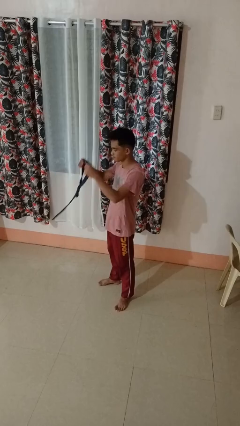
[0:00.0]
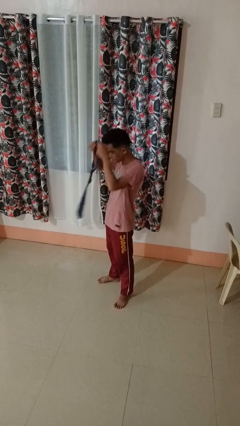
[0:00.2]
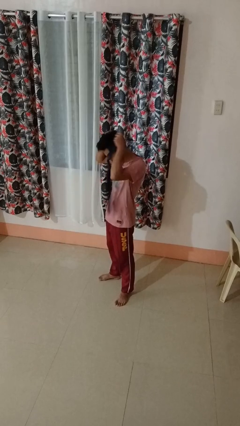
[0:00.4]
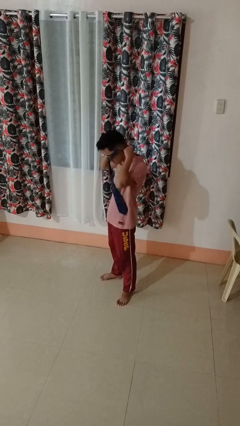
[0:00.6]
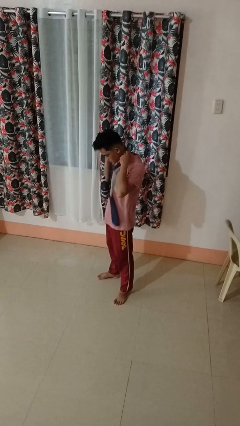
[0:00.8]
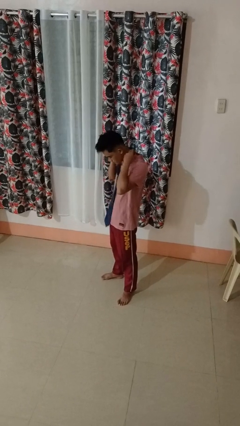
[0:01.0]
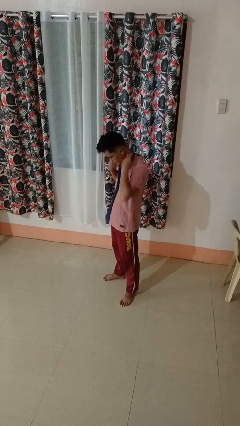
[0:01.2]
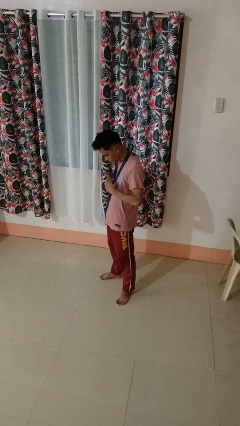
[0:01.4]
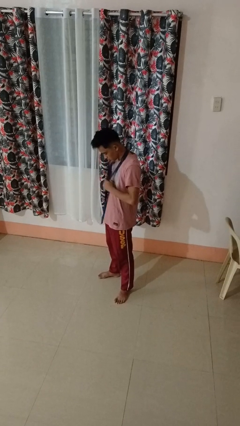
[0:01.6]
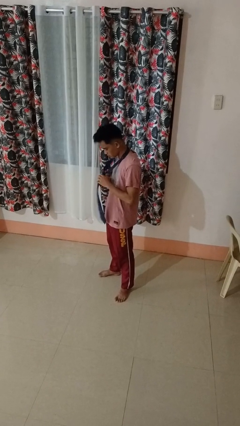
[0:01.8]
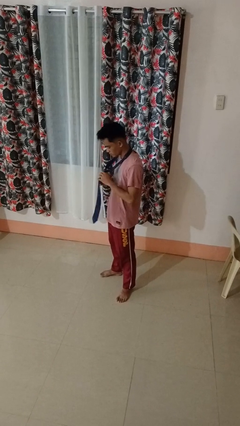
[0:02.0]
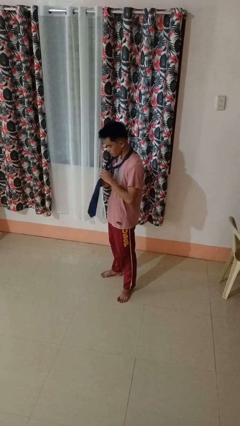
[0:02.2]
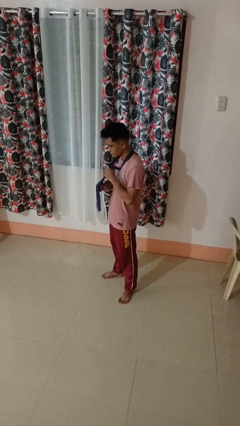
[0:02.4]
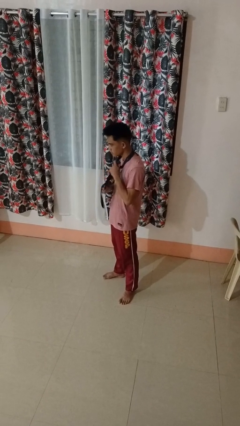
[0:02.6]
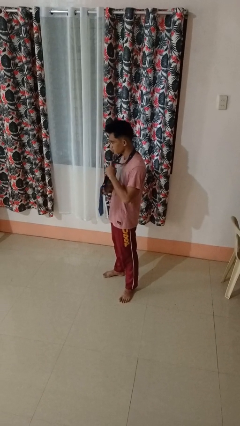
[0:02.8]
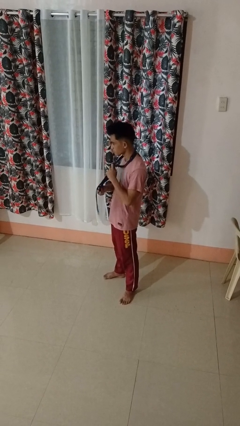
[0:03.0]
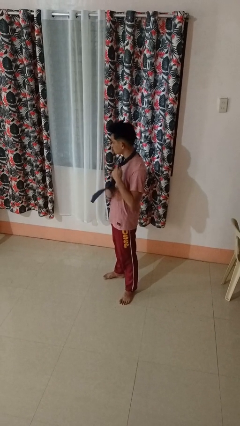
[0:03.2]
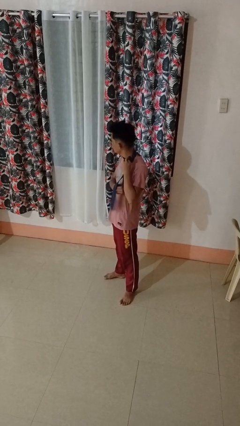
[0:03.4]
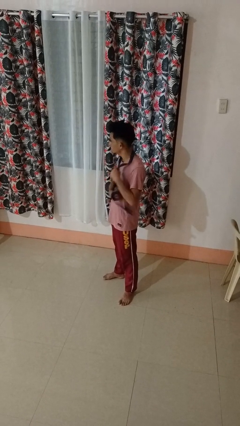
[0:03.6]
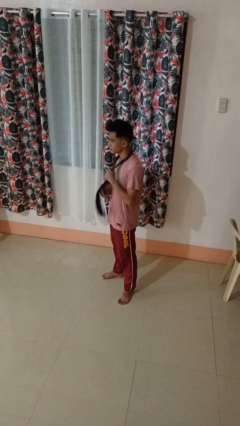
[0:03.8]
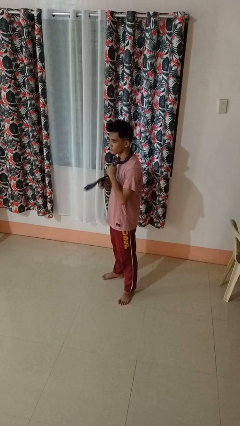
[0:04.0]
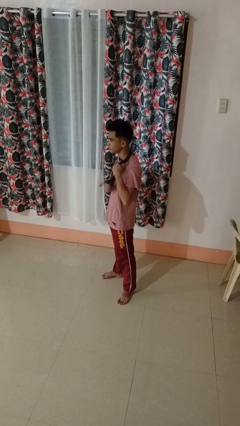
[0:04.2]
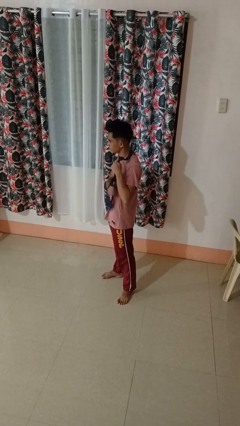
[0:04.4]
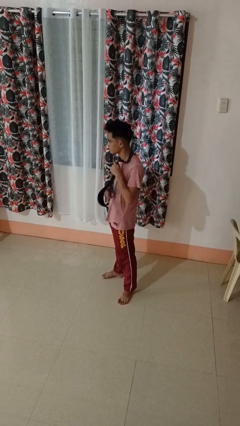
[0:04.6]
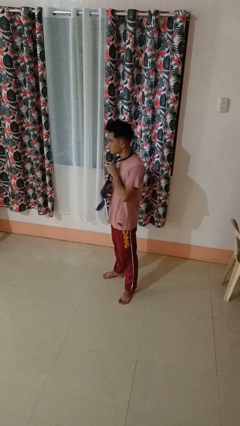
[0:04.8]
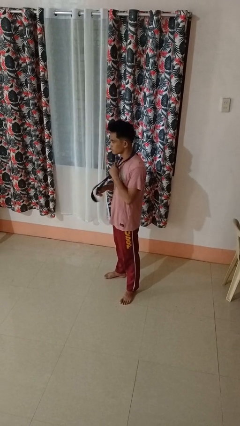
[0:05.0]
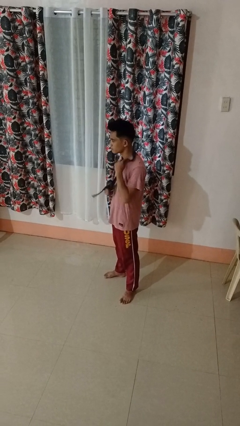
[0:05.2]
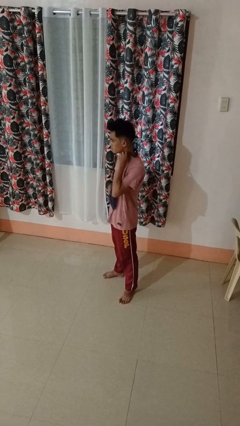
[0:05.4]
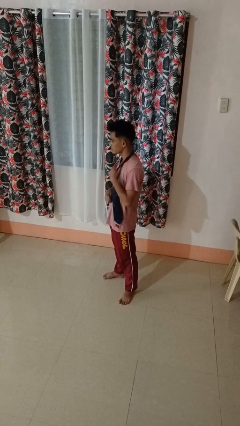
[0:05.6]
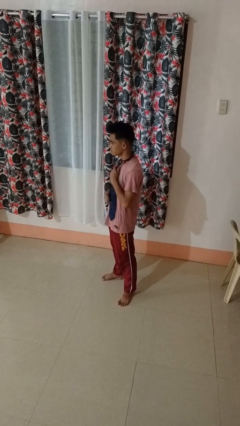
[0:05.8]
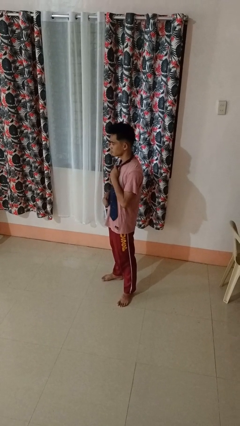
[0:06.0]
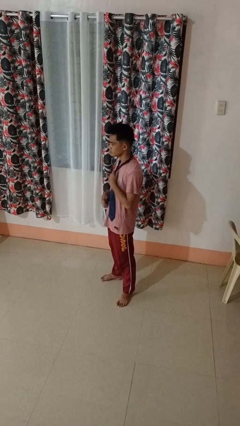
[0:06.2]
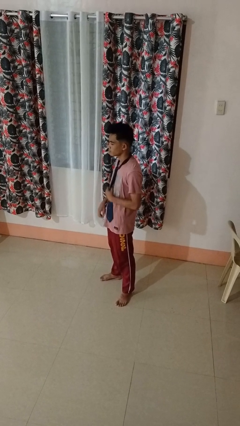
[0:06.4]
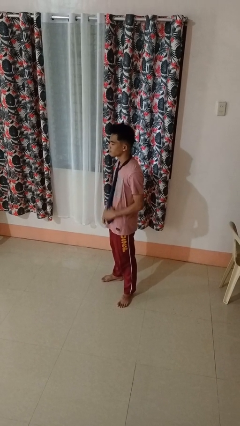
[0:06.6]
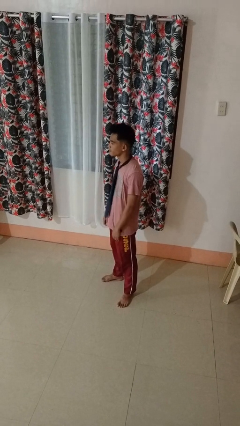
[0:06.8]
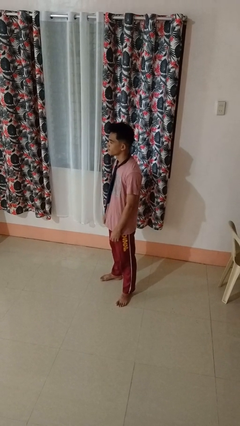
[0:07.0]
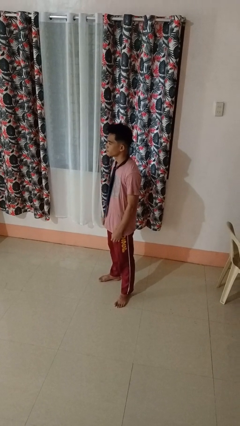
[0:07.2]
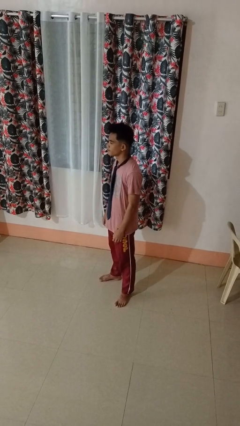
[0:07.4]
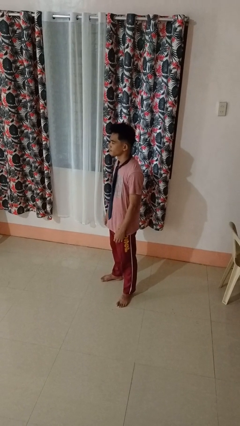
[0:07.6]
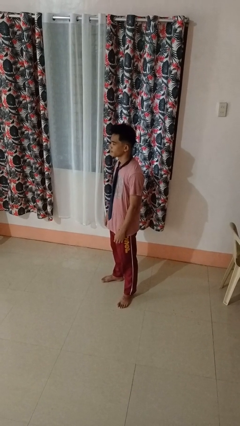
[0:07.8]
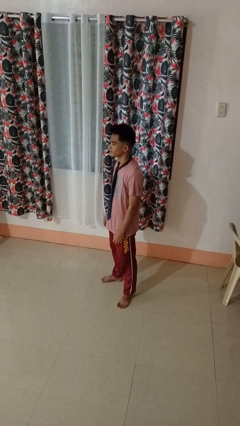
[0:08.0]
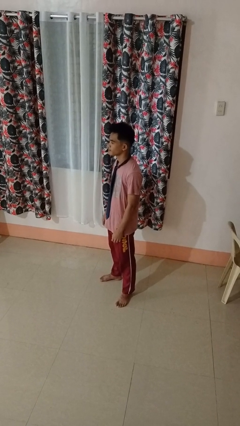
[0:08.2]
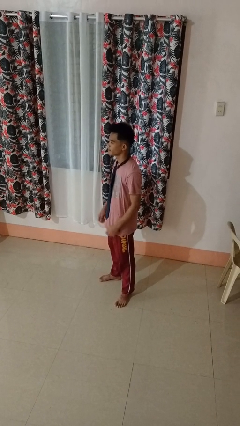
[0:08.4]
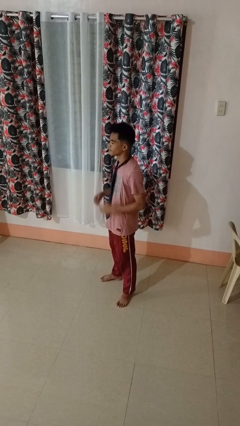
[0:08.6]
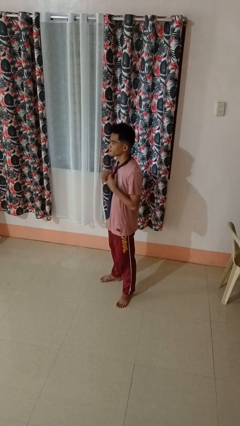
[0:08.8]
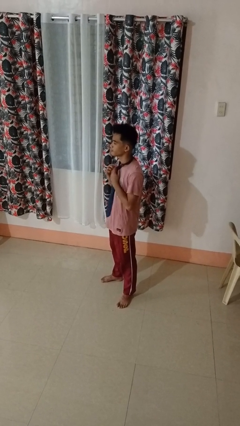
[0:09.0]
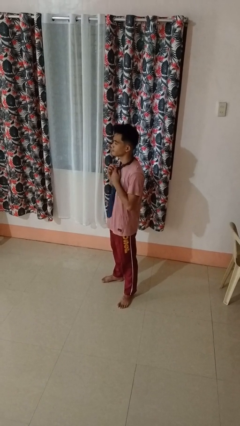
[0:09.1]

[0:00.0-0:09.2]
person puts on necktie

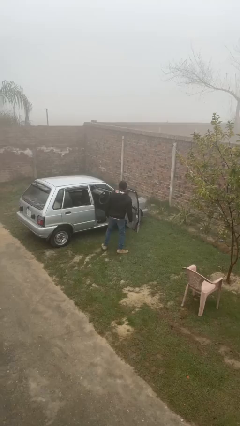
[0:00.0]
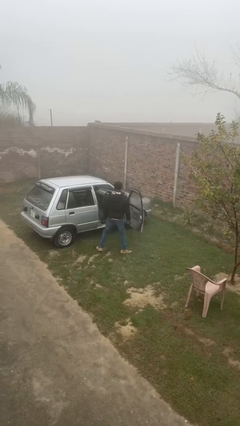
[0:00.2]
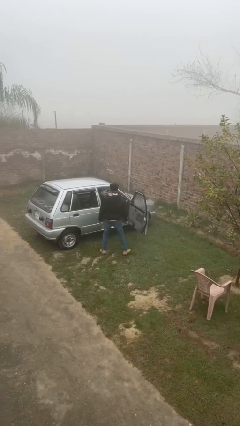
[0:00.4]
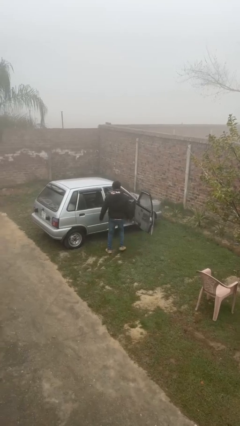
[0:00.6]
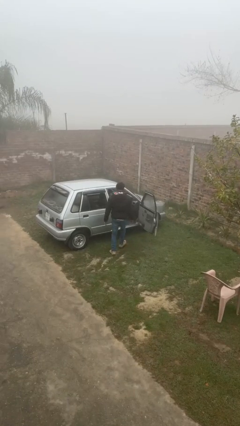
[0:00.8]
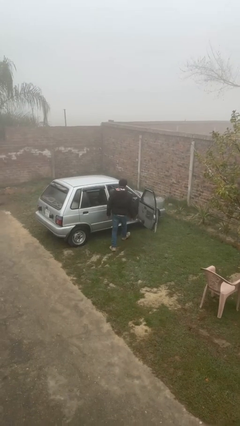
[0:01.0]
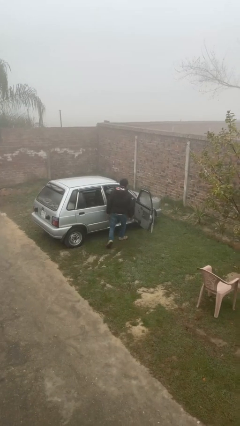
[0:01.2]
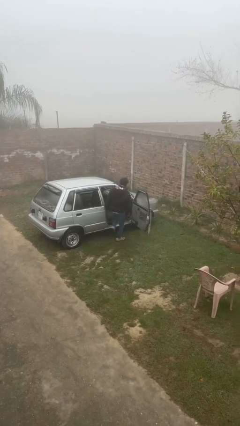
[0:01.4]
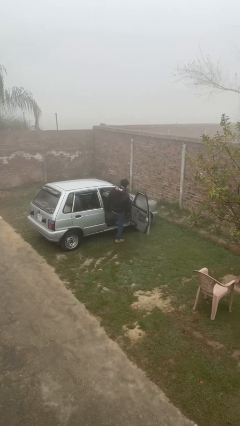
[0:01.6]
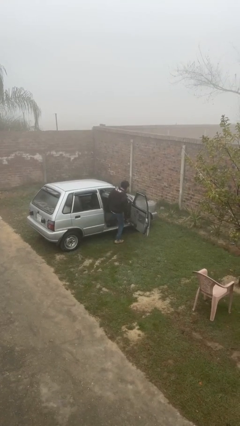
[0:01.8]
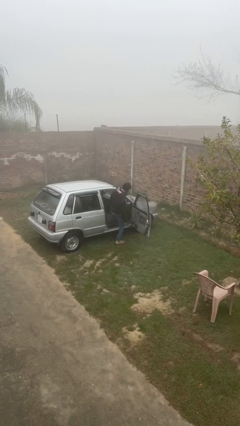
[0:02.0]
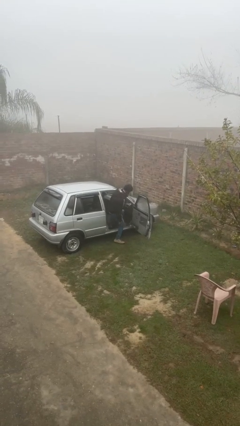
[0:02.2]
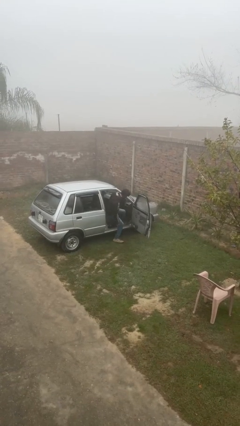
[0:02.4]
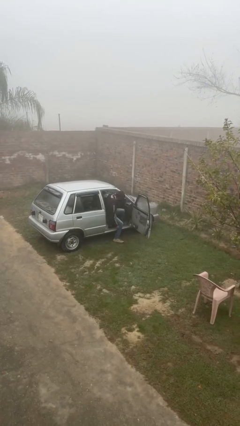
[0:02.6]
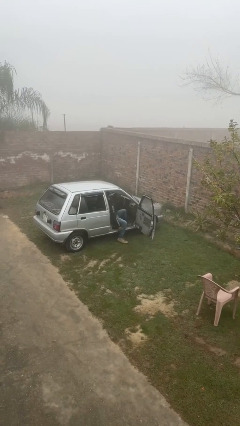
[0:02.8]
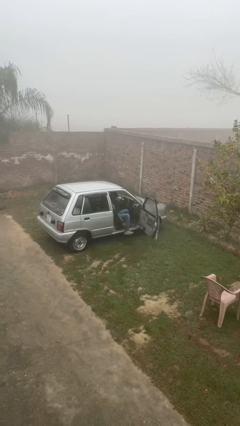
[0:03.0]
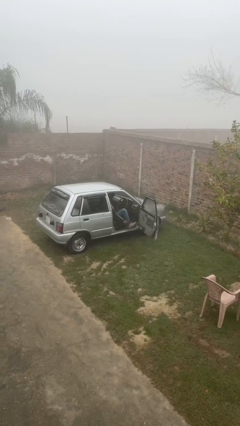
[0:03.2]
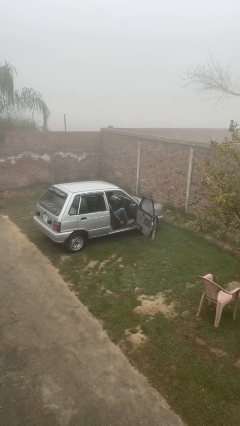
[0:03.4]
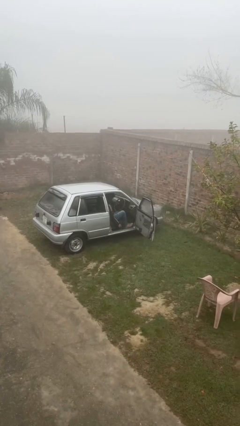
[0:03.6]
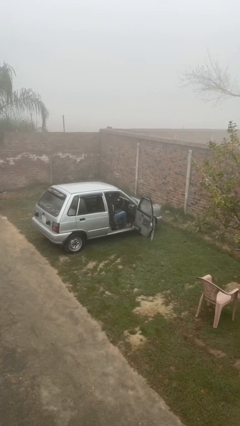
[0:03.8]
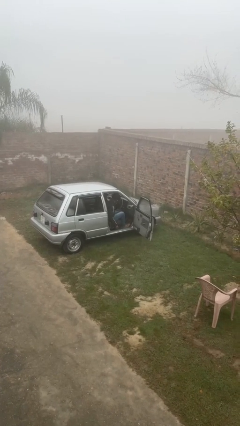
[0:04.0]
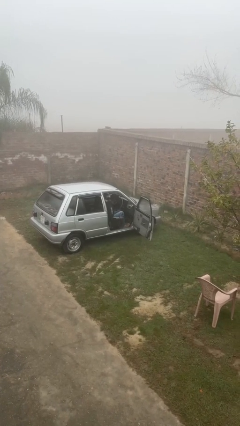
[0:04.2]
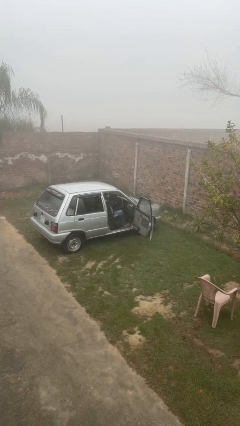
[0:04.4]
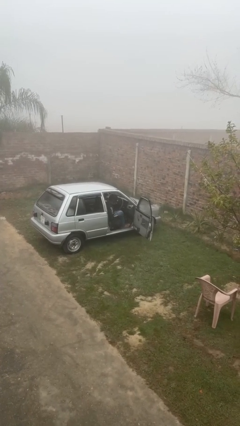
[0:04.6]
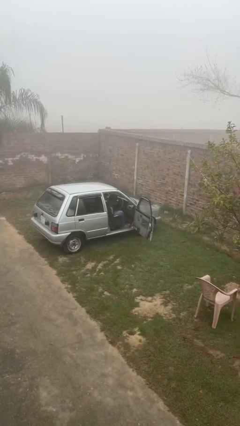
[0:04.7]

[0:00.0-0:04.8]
person enters car

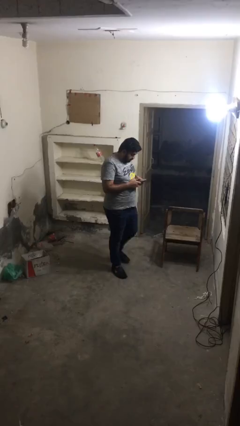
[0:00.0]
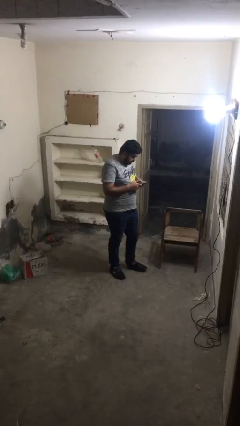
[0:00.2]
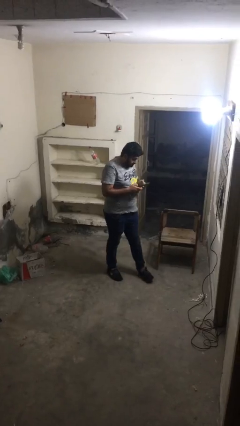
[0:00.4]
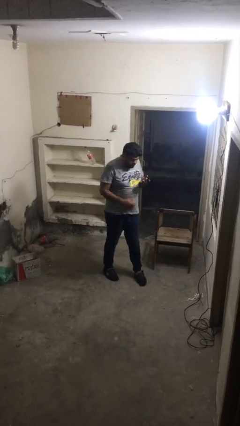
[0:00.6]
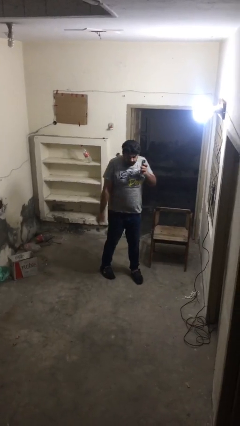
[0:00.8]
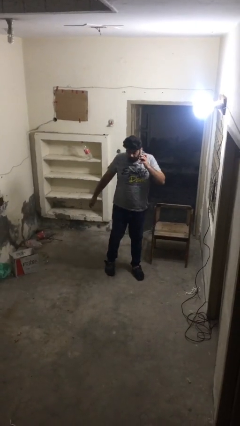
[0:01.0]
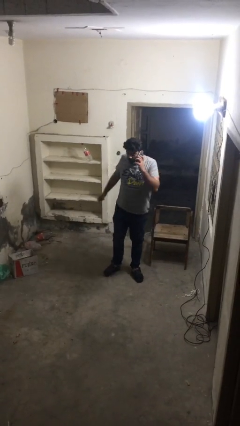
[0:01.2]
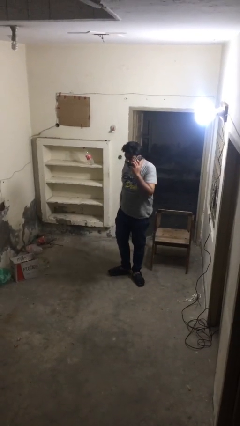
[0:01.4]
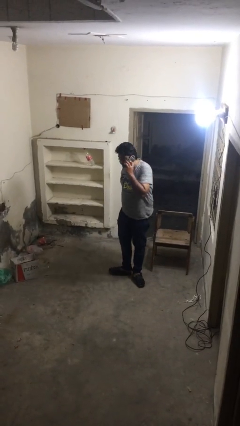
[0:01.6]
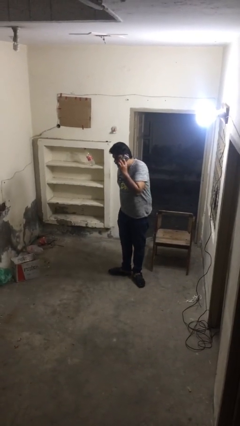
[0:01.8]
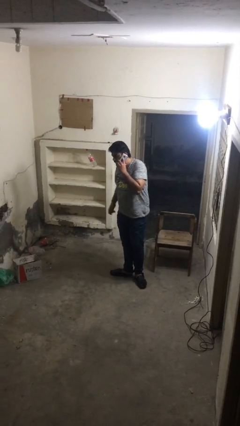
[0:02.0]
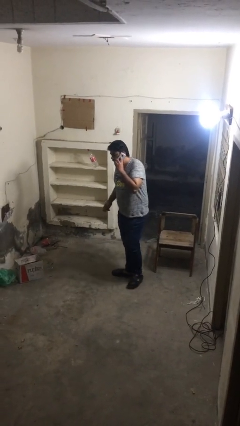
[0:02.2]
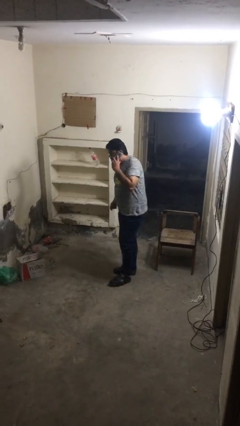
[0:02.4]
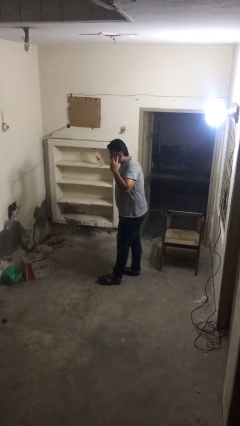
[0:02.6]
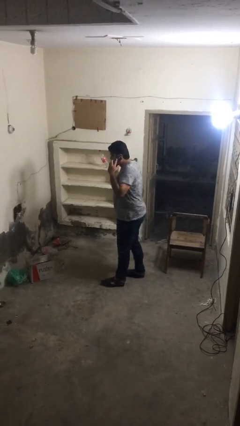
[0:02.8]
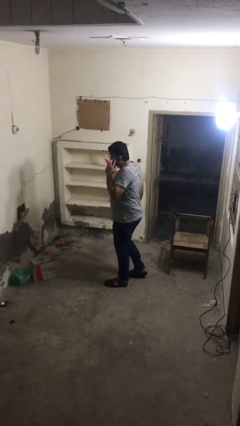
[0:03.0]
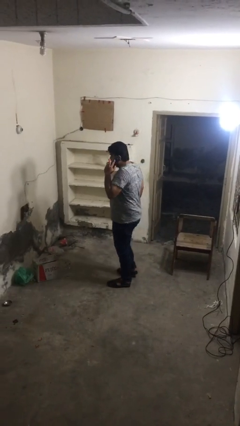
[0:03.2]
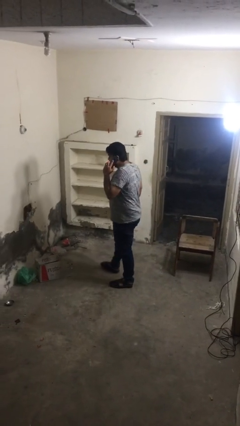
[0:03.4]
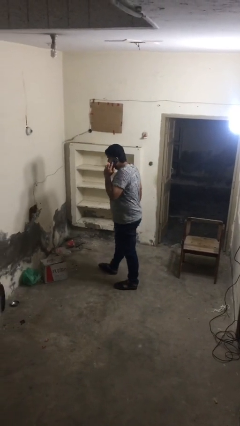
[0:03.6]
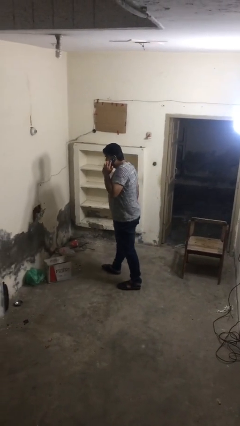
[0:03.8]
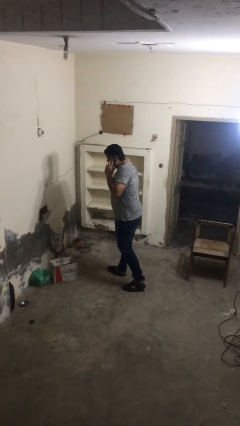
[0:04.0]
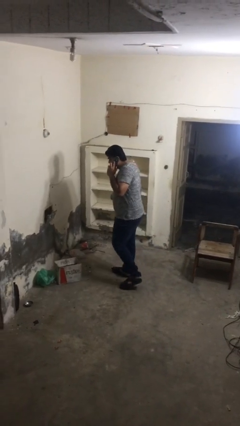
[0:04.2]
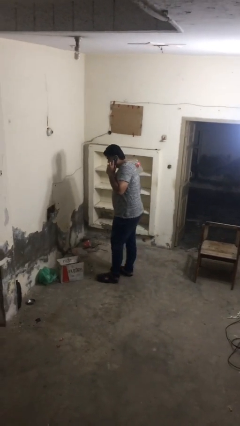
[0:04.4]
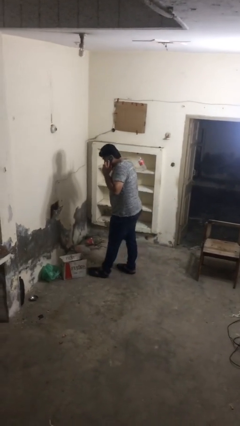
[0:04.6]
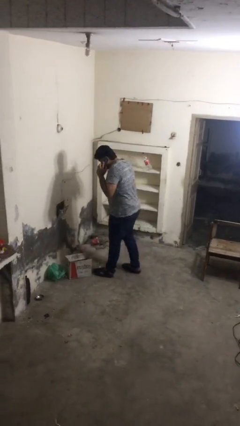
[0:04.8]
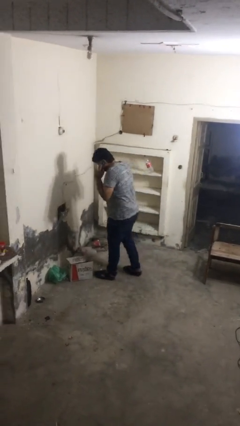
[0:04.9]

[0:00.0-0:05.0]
person talks on phone
